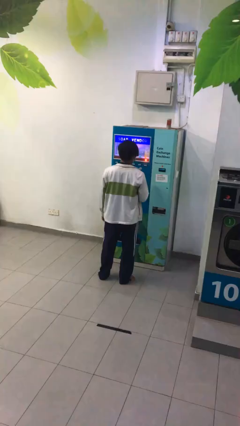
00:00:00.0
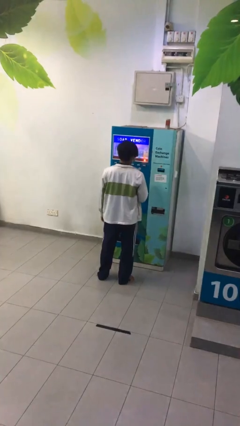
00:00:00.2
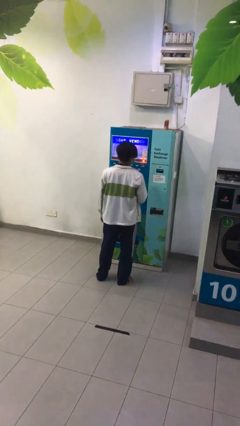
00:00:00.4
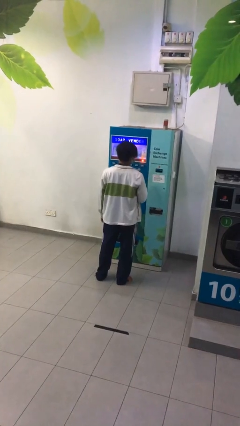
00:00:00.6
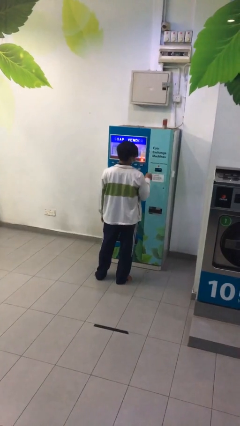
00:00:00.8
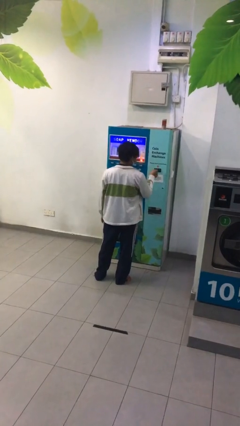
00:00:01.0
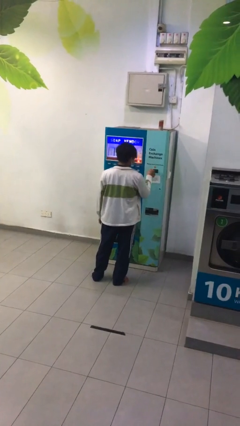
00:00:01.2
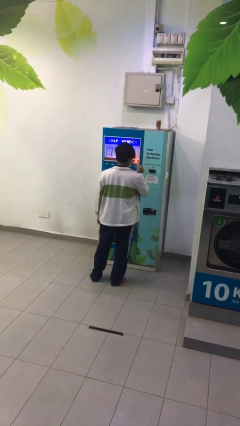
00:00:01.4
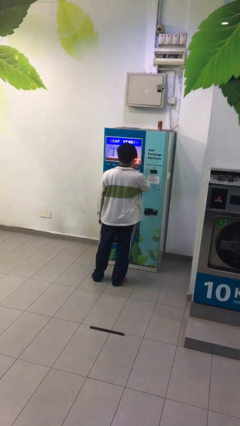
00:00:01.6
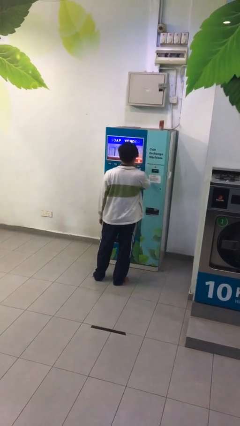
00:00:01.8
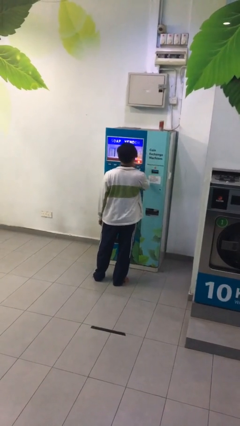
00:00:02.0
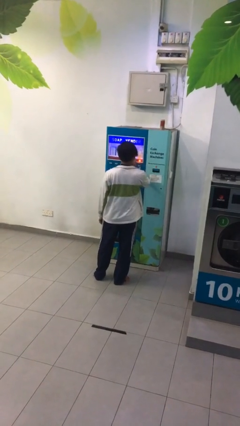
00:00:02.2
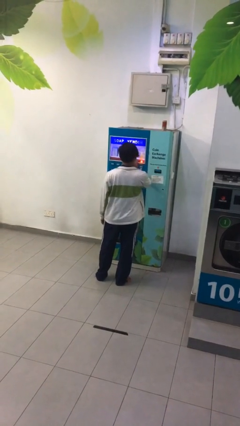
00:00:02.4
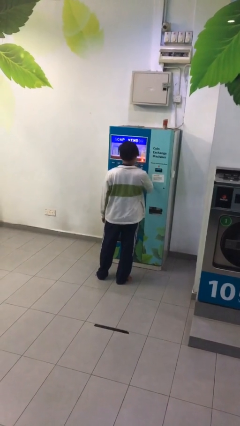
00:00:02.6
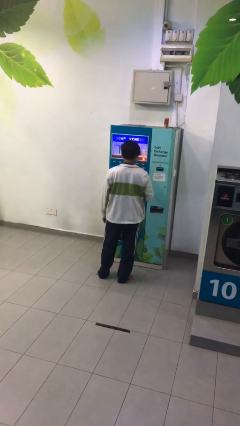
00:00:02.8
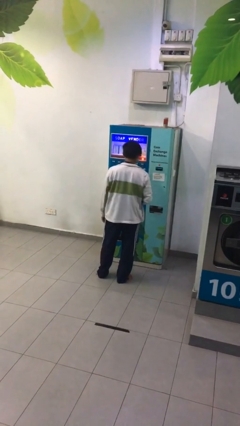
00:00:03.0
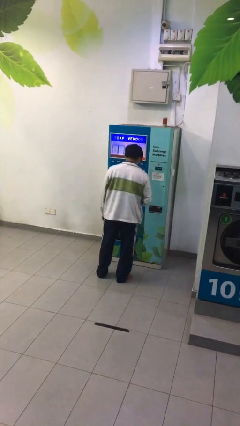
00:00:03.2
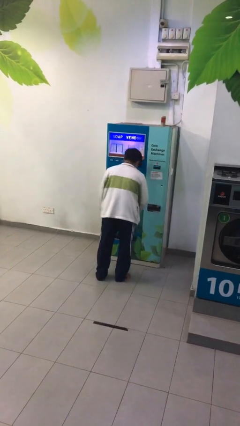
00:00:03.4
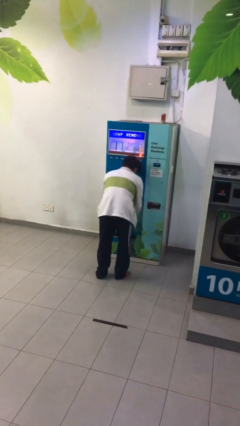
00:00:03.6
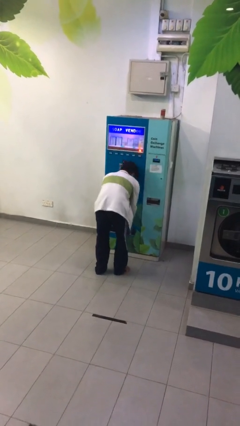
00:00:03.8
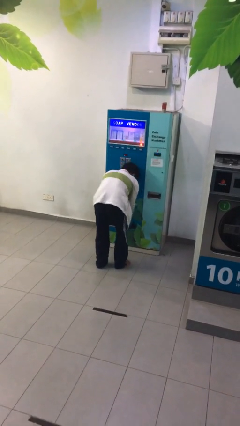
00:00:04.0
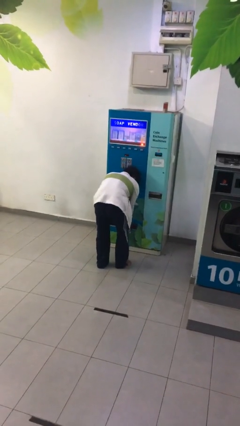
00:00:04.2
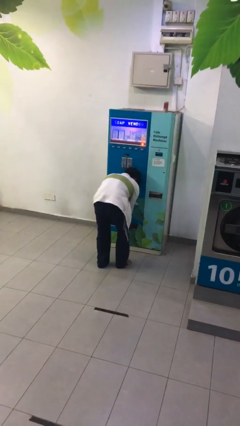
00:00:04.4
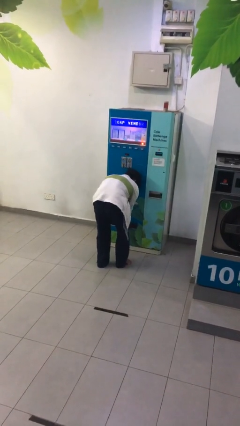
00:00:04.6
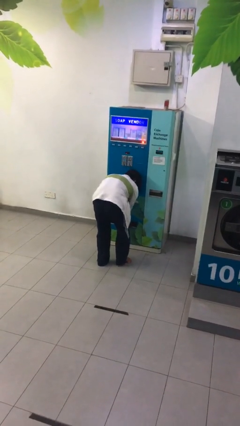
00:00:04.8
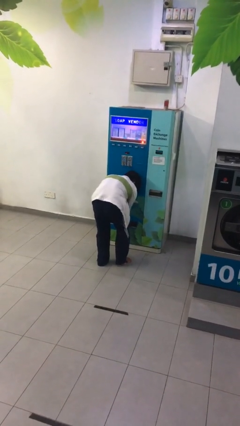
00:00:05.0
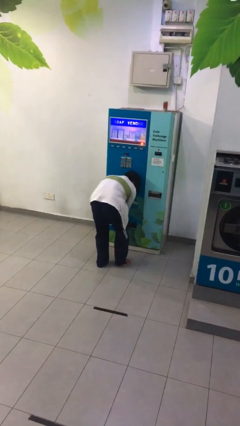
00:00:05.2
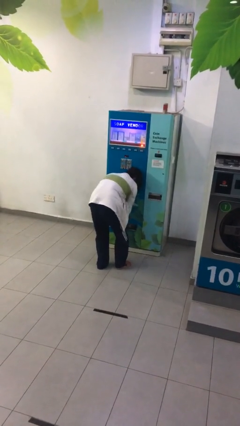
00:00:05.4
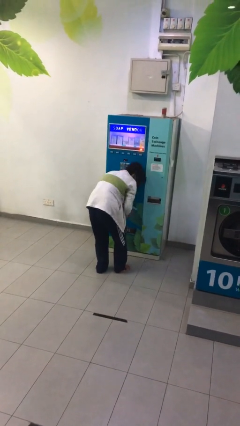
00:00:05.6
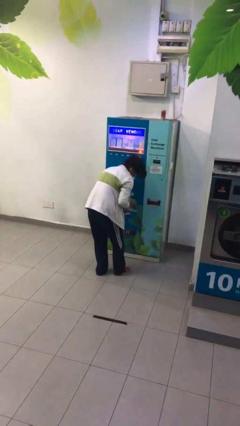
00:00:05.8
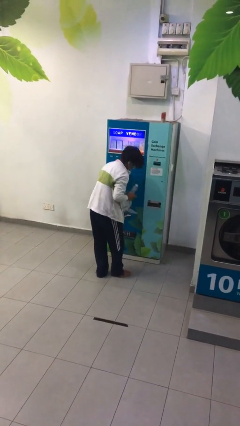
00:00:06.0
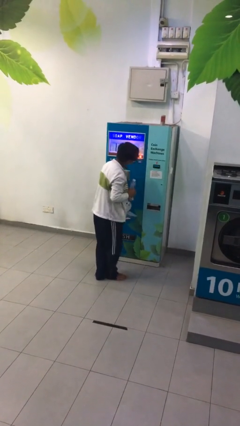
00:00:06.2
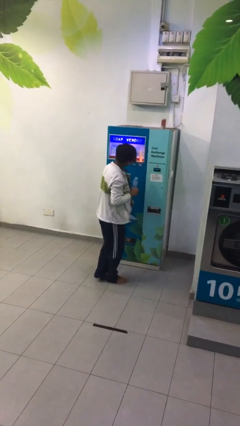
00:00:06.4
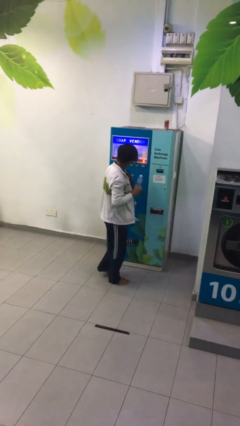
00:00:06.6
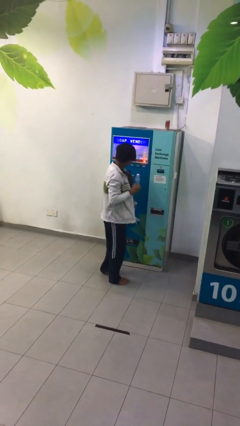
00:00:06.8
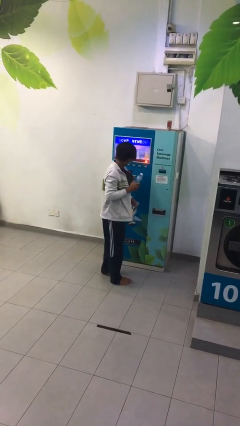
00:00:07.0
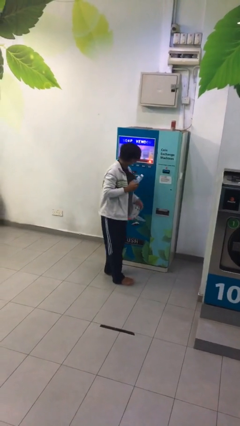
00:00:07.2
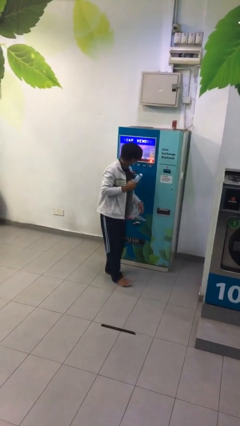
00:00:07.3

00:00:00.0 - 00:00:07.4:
person purchases from machine

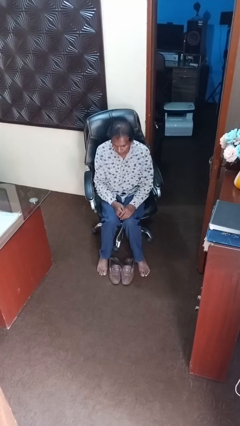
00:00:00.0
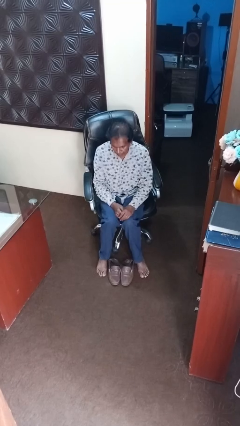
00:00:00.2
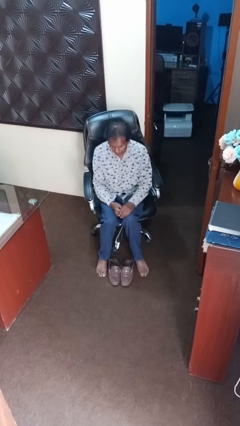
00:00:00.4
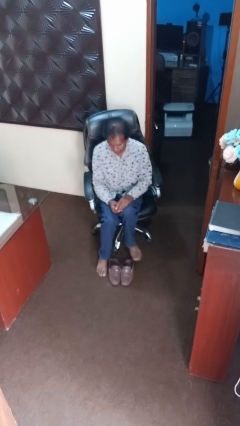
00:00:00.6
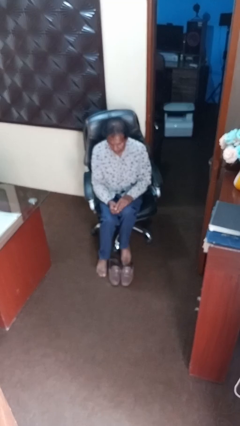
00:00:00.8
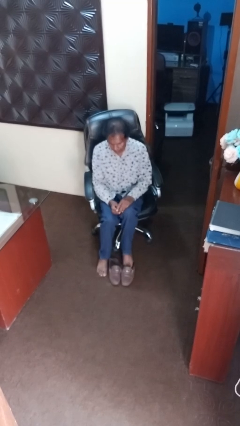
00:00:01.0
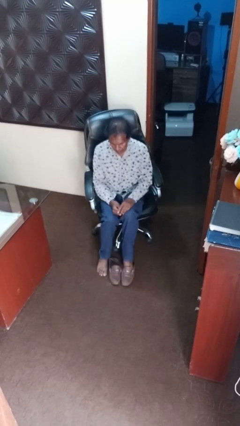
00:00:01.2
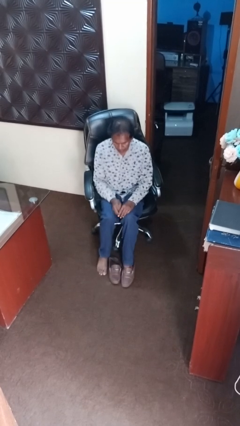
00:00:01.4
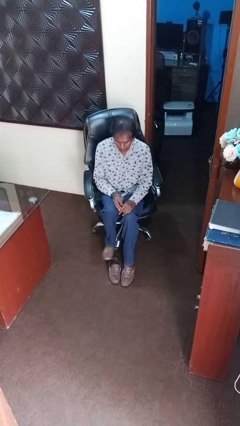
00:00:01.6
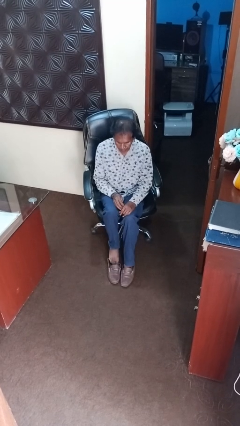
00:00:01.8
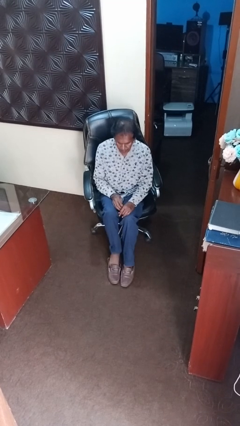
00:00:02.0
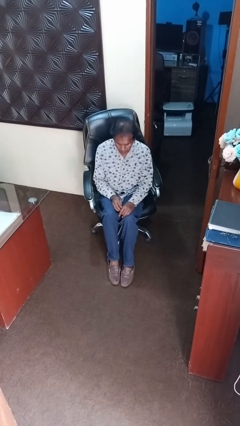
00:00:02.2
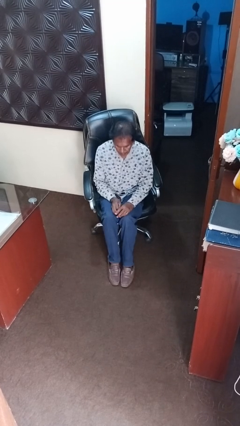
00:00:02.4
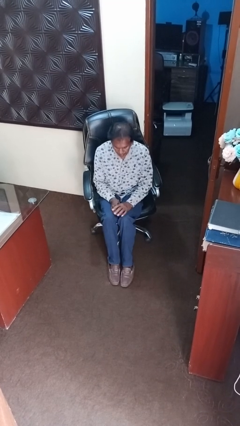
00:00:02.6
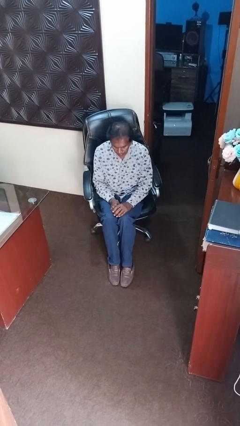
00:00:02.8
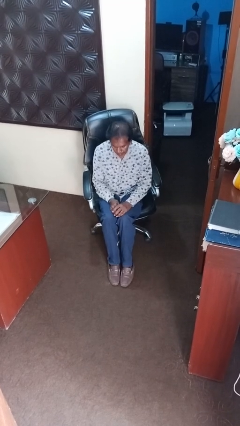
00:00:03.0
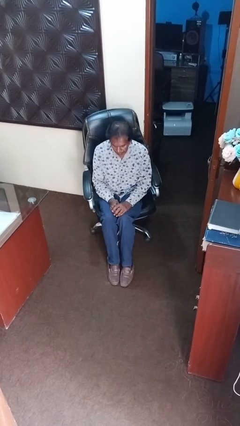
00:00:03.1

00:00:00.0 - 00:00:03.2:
person puts on shoes

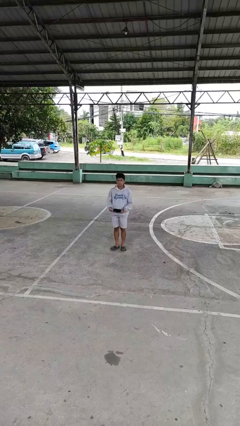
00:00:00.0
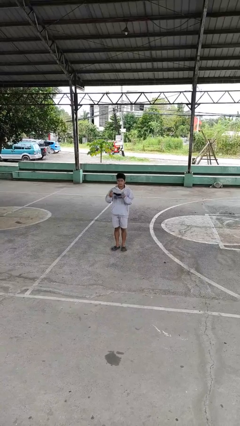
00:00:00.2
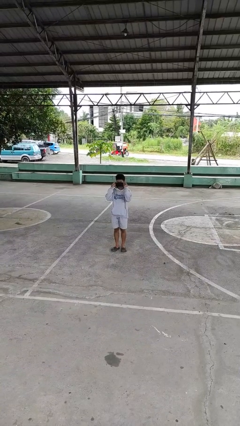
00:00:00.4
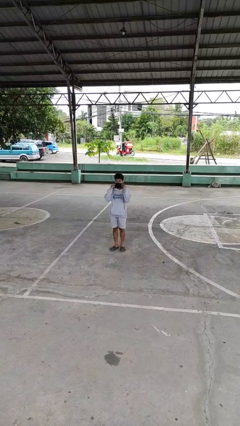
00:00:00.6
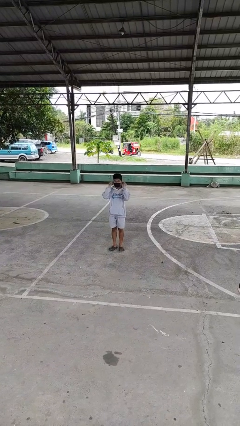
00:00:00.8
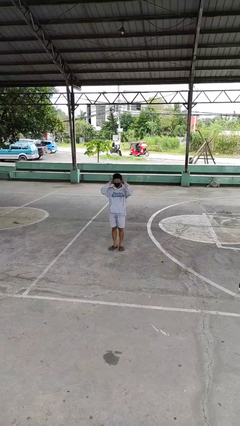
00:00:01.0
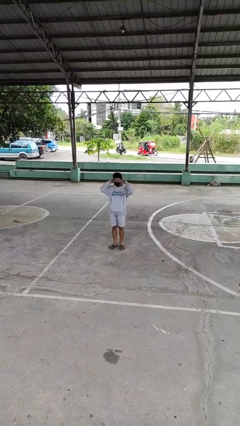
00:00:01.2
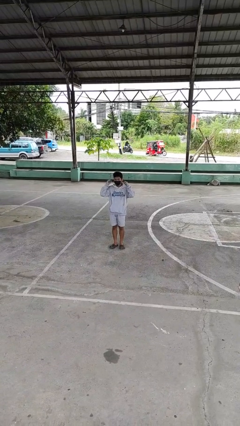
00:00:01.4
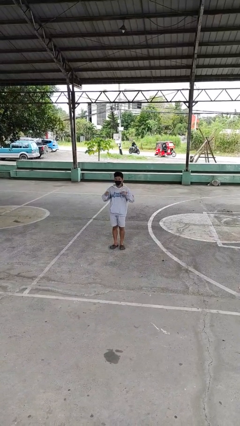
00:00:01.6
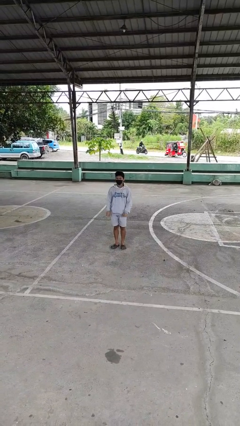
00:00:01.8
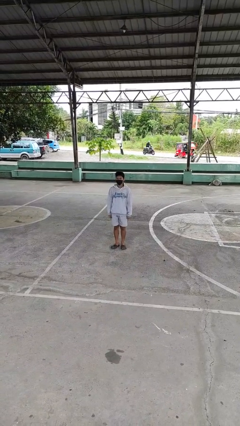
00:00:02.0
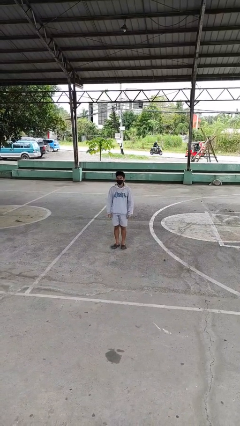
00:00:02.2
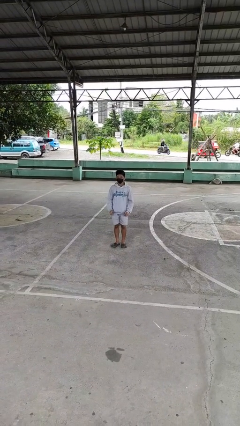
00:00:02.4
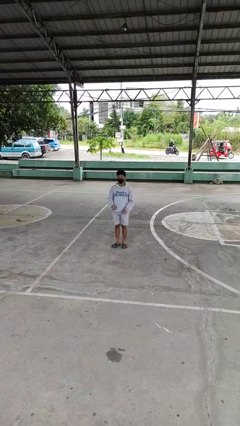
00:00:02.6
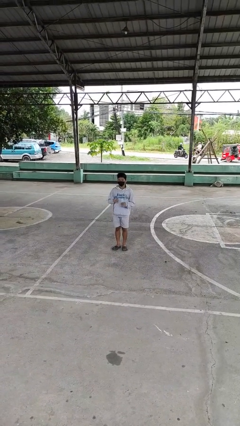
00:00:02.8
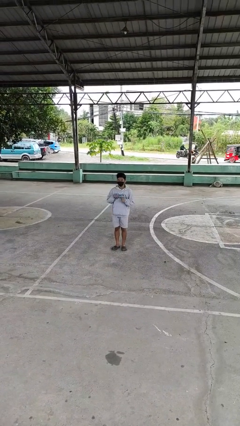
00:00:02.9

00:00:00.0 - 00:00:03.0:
person puts on facemask

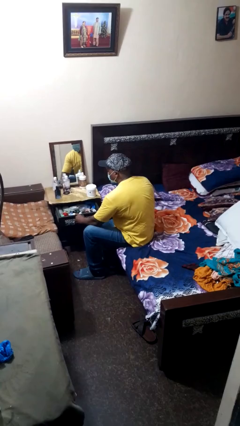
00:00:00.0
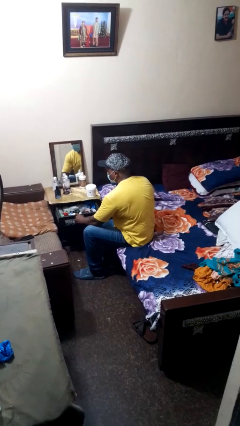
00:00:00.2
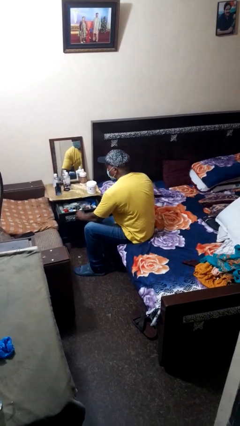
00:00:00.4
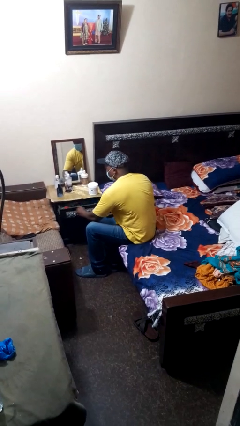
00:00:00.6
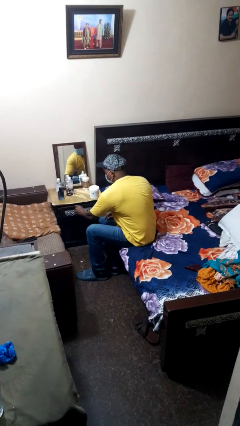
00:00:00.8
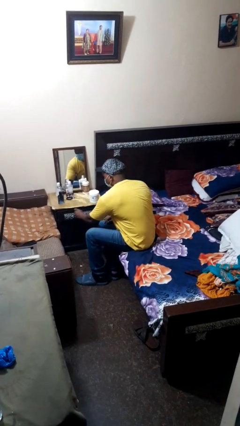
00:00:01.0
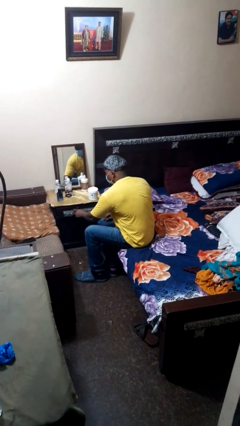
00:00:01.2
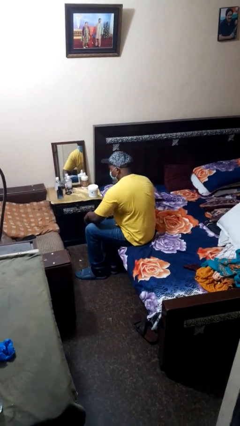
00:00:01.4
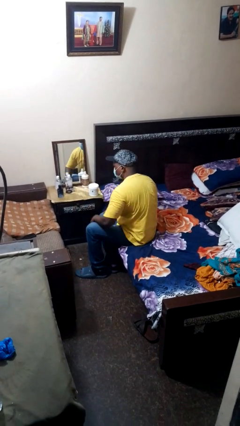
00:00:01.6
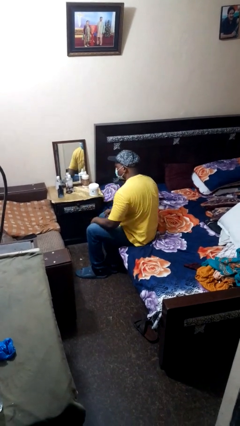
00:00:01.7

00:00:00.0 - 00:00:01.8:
person closes dresser drawer

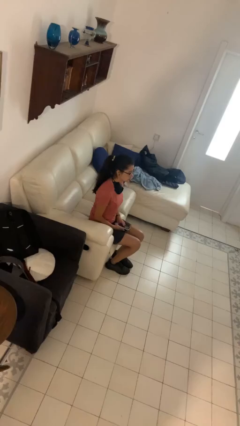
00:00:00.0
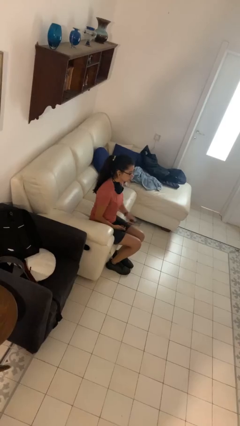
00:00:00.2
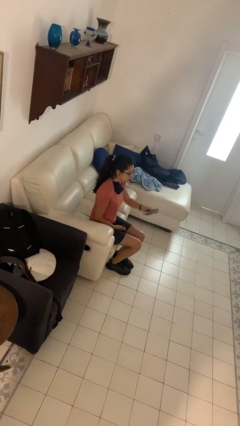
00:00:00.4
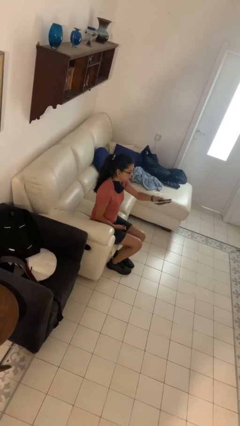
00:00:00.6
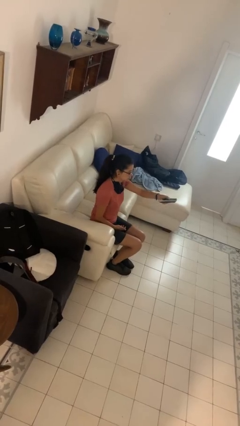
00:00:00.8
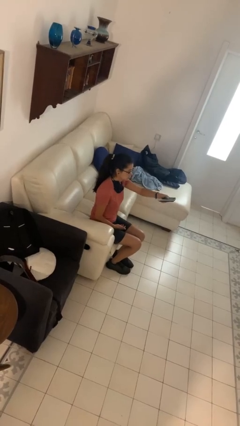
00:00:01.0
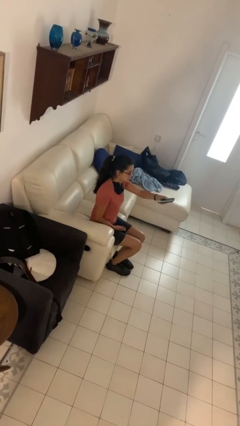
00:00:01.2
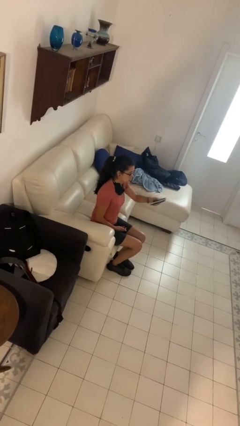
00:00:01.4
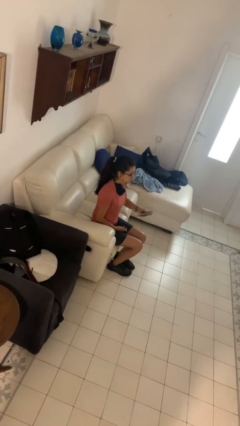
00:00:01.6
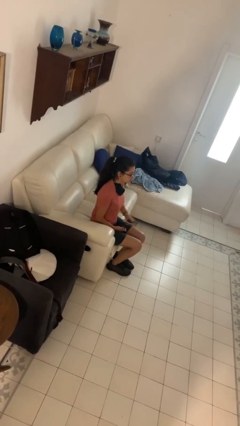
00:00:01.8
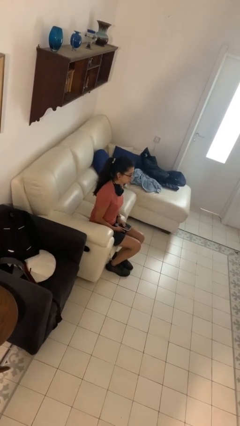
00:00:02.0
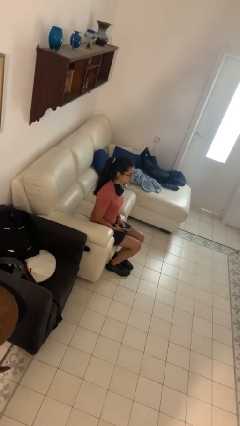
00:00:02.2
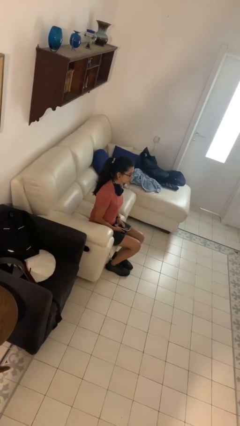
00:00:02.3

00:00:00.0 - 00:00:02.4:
person uses television remote
